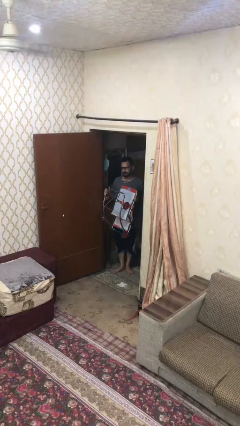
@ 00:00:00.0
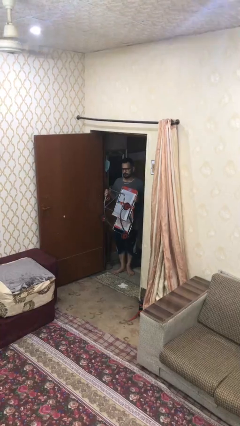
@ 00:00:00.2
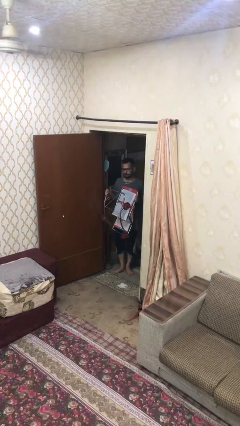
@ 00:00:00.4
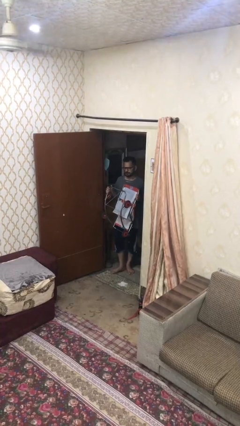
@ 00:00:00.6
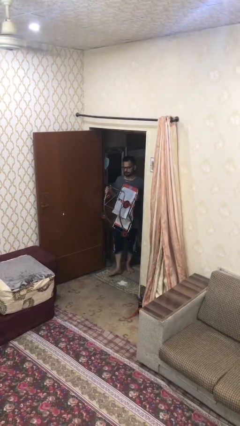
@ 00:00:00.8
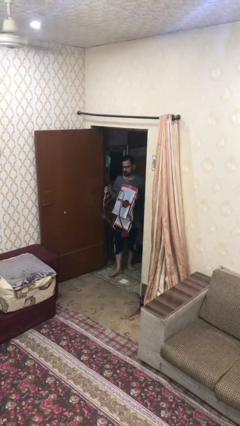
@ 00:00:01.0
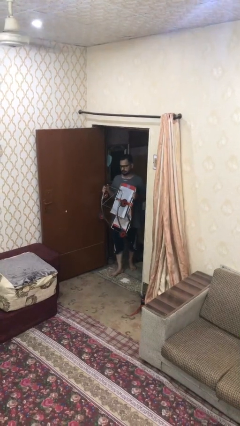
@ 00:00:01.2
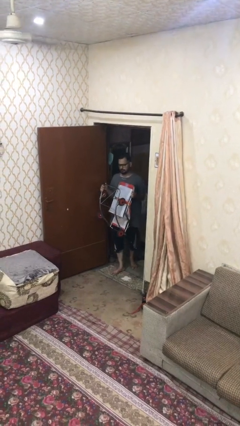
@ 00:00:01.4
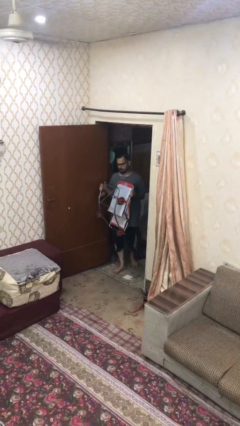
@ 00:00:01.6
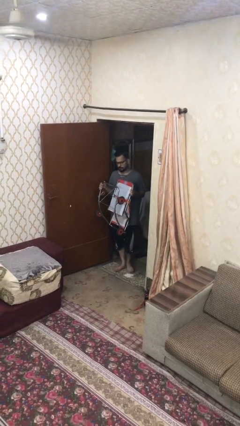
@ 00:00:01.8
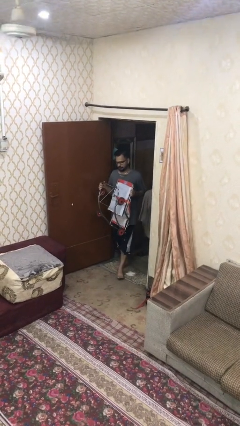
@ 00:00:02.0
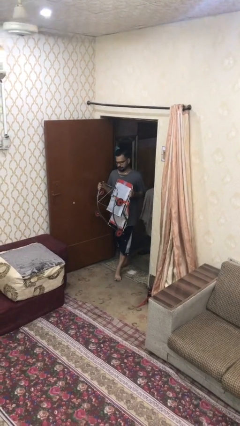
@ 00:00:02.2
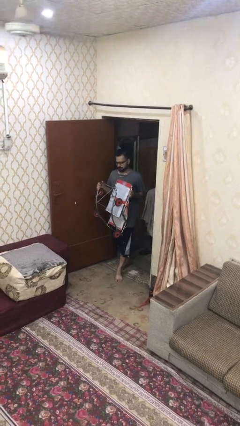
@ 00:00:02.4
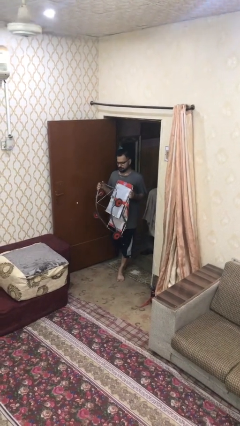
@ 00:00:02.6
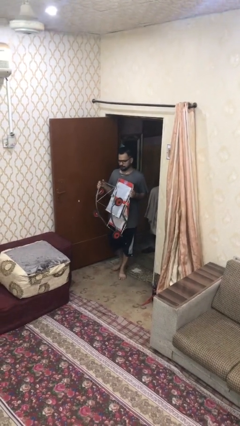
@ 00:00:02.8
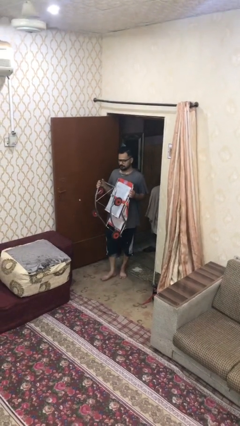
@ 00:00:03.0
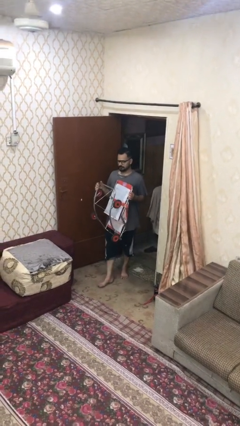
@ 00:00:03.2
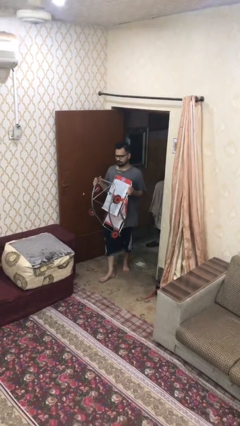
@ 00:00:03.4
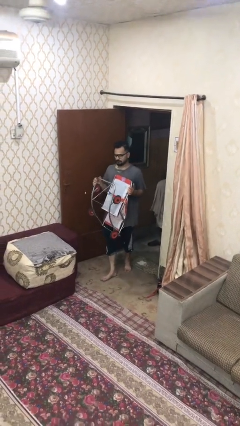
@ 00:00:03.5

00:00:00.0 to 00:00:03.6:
person carries heavy object

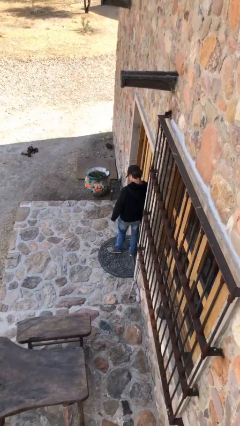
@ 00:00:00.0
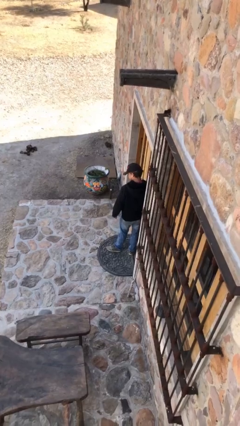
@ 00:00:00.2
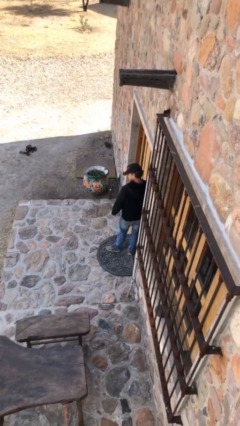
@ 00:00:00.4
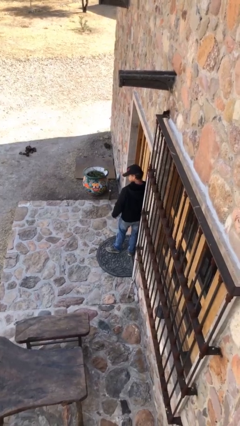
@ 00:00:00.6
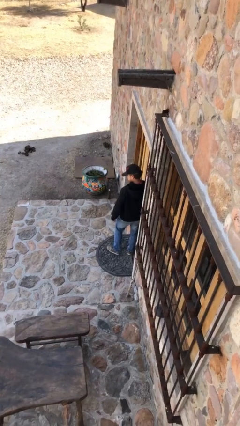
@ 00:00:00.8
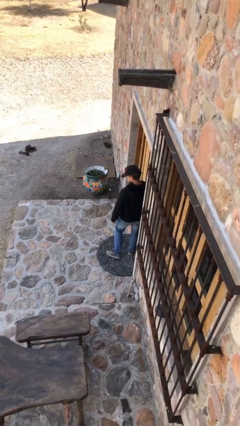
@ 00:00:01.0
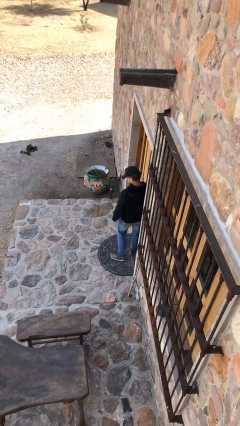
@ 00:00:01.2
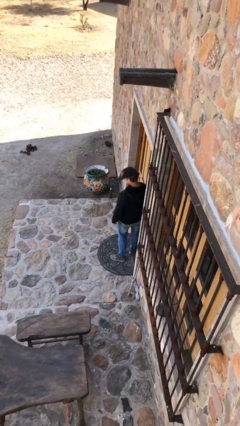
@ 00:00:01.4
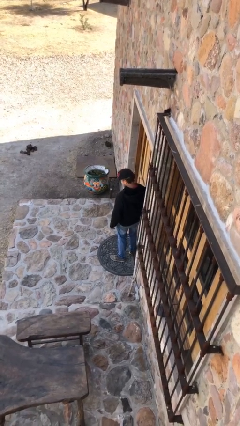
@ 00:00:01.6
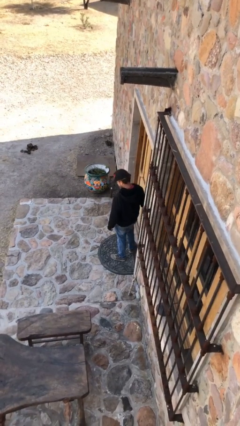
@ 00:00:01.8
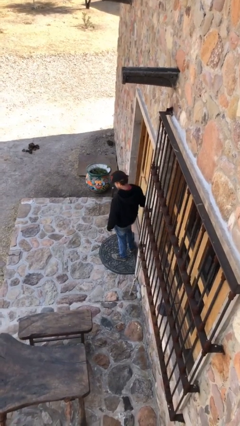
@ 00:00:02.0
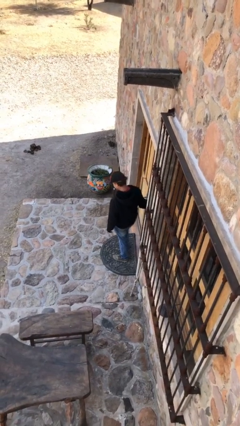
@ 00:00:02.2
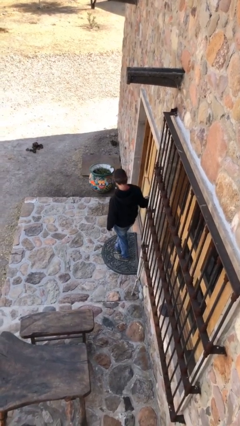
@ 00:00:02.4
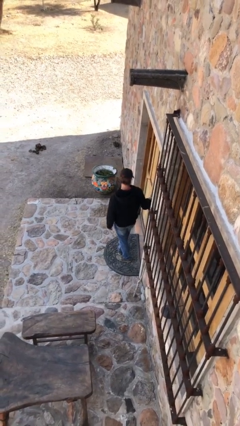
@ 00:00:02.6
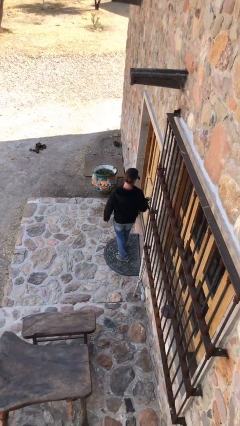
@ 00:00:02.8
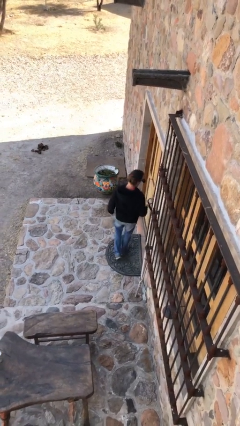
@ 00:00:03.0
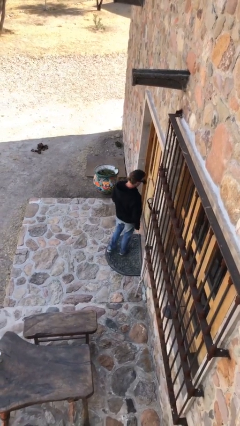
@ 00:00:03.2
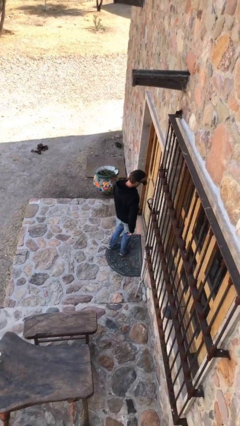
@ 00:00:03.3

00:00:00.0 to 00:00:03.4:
person closes facility door

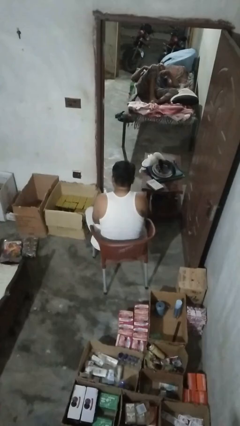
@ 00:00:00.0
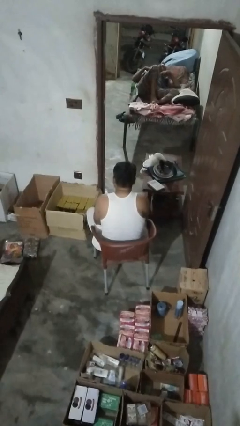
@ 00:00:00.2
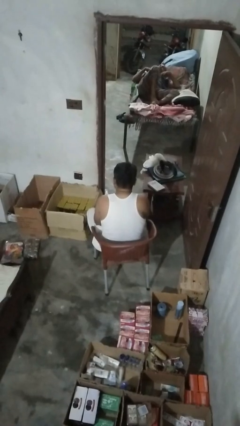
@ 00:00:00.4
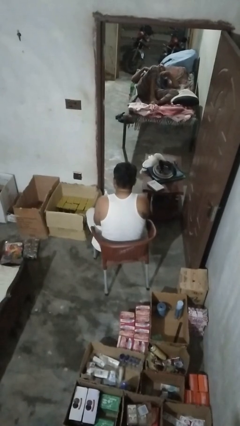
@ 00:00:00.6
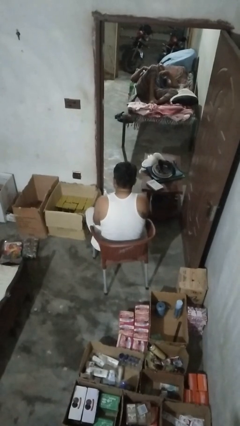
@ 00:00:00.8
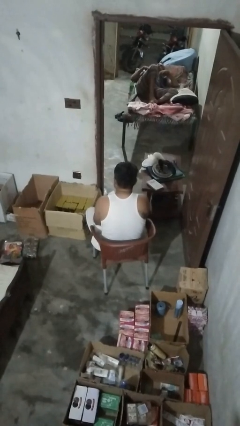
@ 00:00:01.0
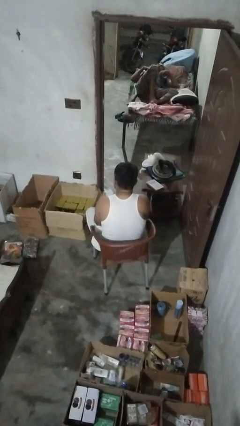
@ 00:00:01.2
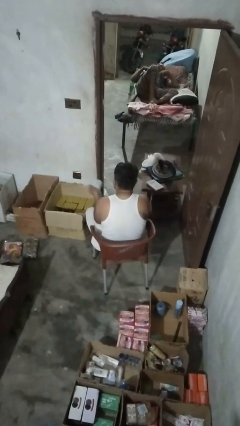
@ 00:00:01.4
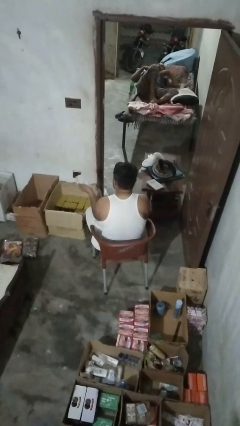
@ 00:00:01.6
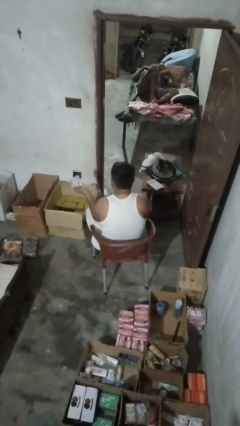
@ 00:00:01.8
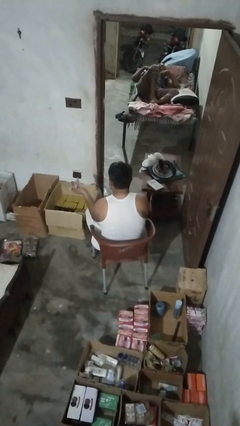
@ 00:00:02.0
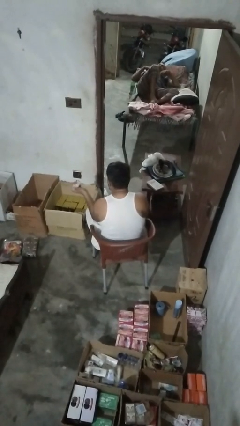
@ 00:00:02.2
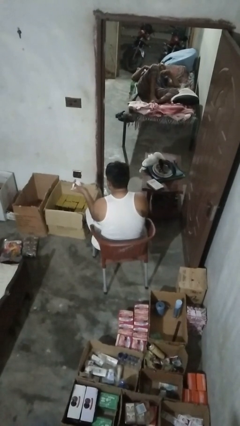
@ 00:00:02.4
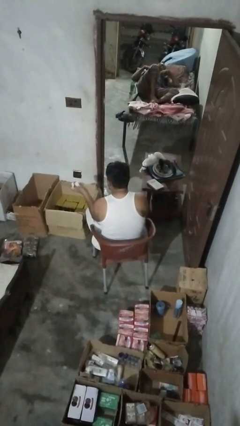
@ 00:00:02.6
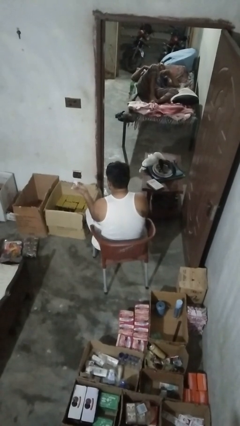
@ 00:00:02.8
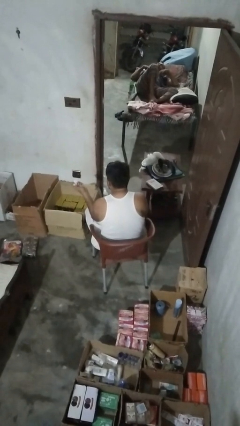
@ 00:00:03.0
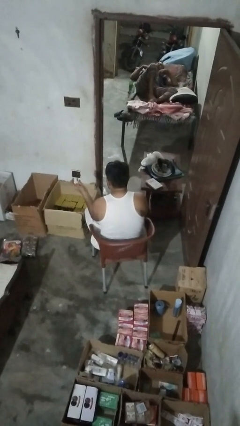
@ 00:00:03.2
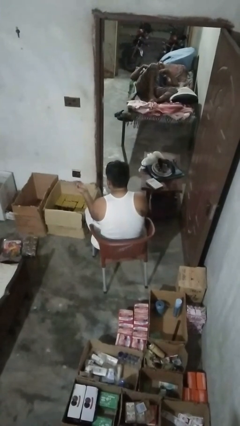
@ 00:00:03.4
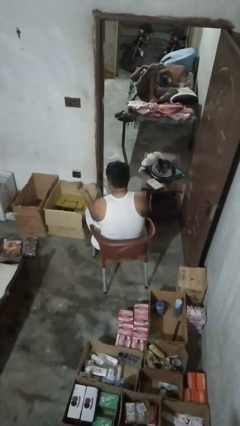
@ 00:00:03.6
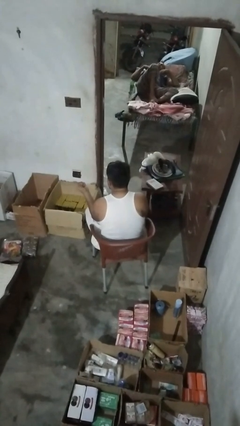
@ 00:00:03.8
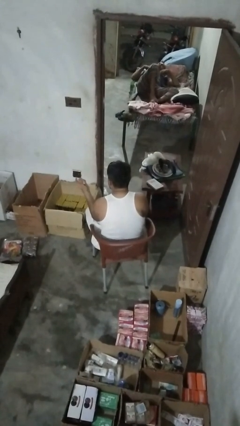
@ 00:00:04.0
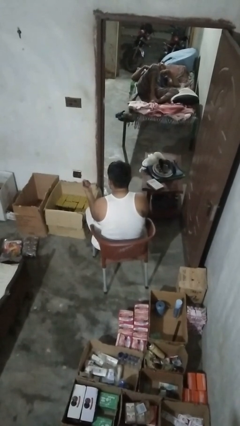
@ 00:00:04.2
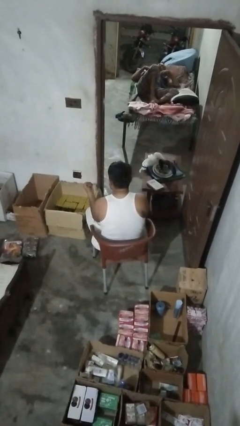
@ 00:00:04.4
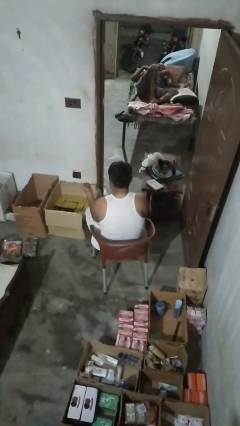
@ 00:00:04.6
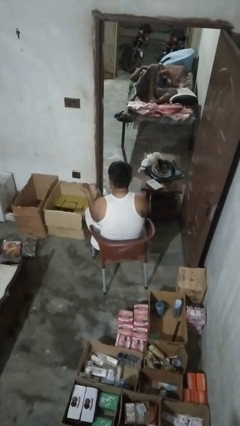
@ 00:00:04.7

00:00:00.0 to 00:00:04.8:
person crumples paper

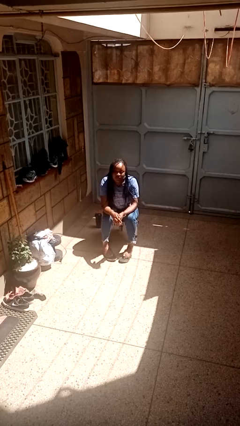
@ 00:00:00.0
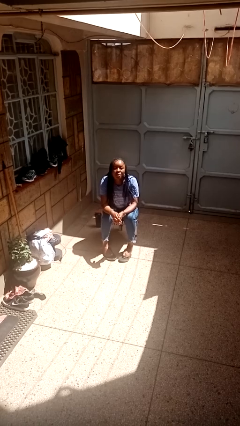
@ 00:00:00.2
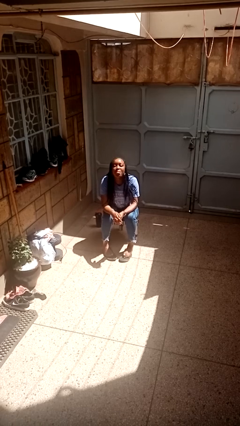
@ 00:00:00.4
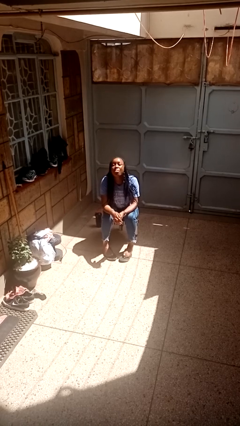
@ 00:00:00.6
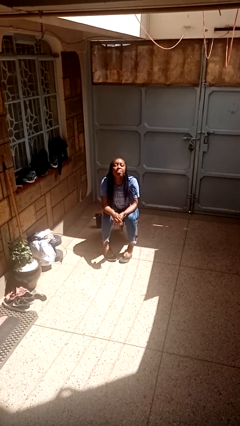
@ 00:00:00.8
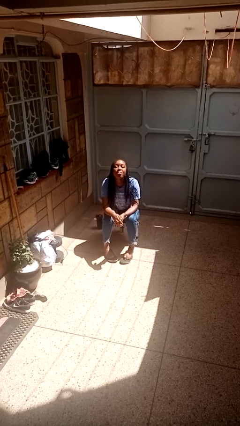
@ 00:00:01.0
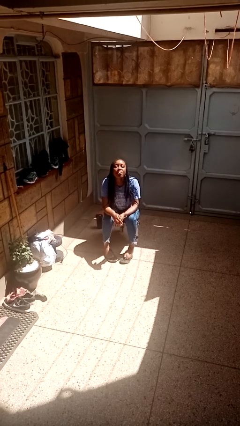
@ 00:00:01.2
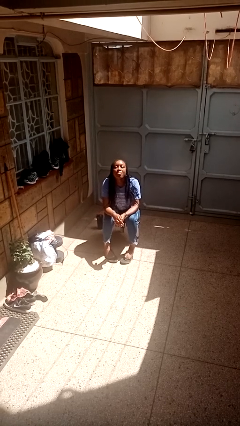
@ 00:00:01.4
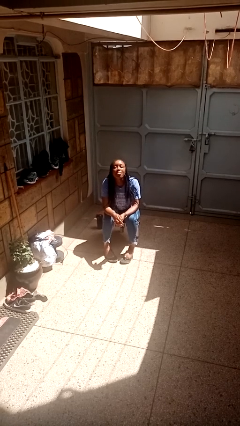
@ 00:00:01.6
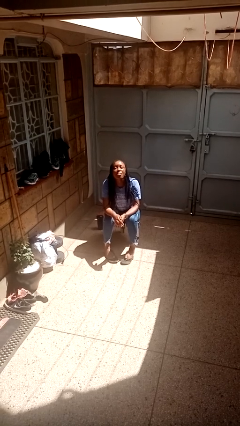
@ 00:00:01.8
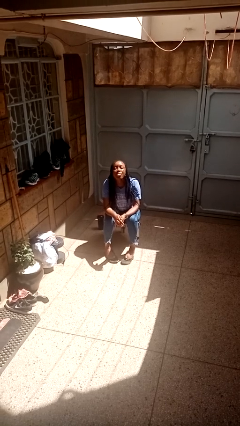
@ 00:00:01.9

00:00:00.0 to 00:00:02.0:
person sticks out tongue

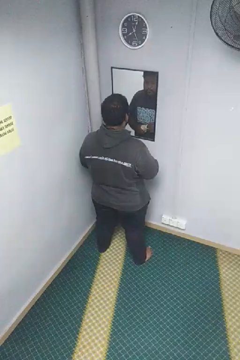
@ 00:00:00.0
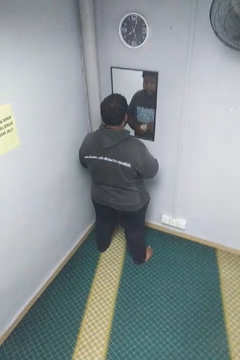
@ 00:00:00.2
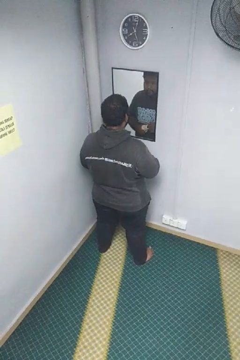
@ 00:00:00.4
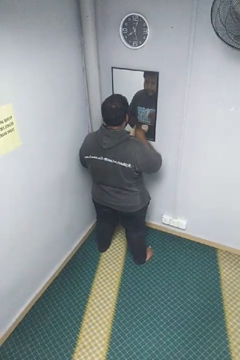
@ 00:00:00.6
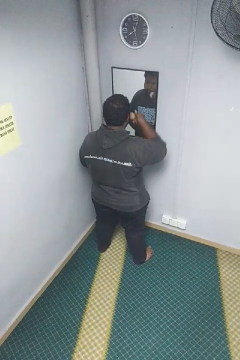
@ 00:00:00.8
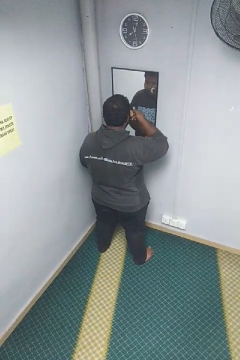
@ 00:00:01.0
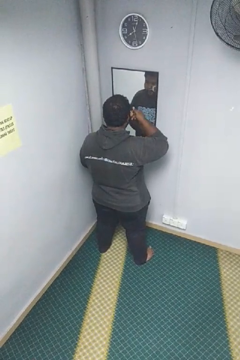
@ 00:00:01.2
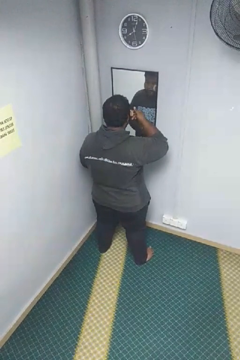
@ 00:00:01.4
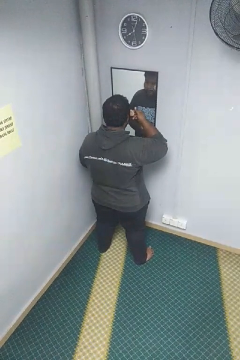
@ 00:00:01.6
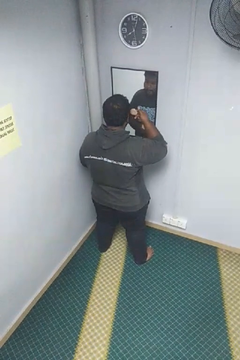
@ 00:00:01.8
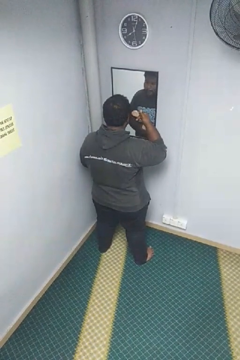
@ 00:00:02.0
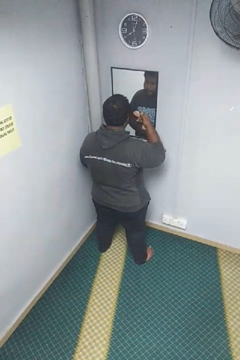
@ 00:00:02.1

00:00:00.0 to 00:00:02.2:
person applies foundation makeup

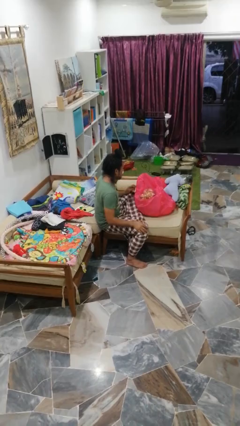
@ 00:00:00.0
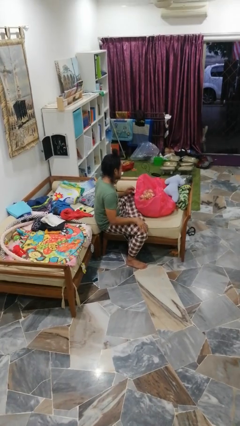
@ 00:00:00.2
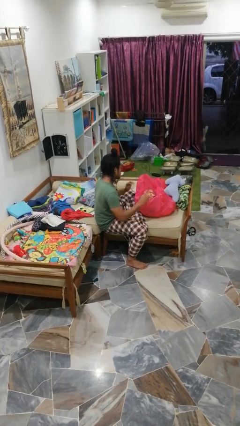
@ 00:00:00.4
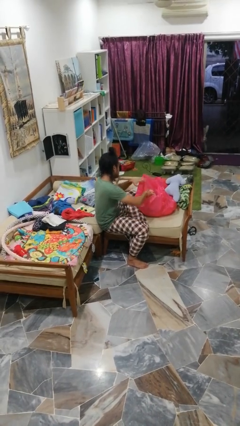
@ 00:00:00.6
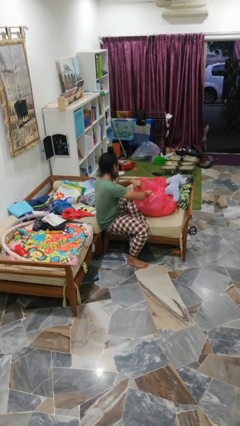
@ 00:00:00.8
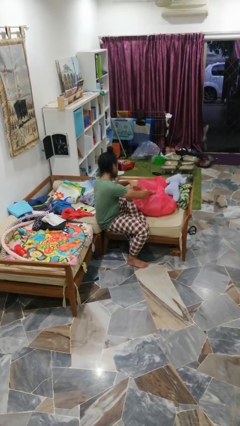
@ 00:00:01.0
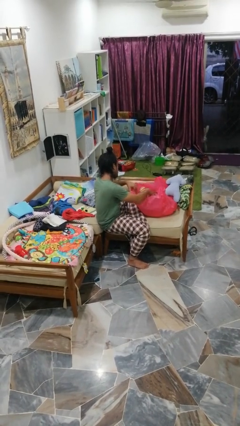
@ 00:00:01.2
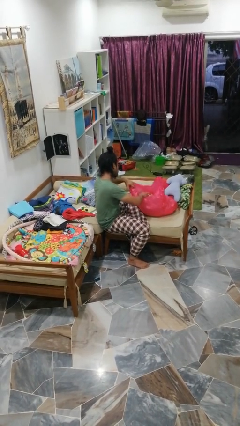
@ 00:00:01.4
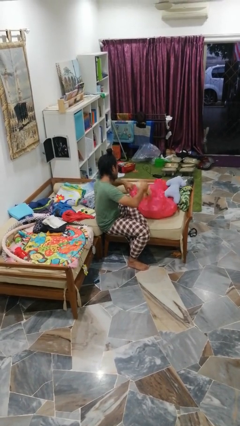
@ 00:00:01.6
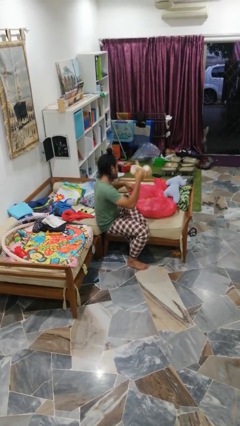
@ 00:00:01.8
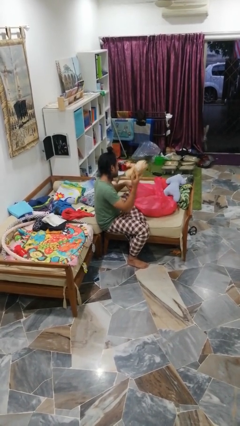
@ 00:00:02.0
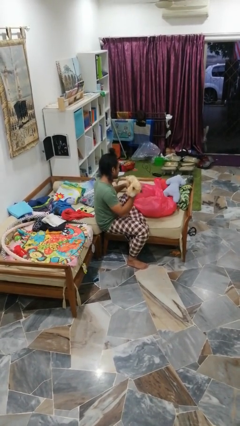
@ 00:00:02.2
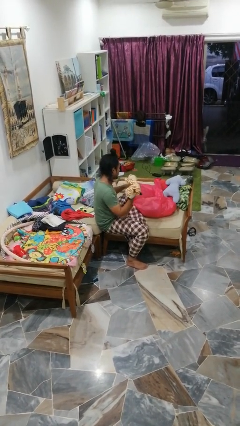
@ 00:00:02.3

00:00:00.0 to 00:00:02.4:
person takes object from bag
